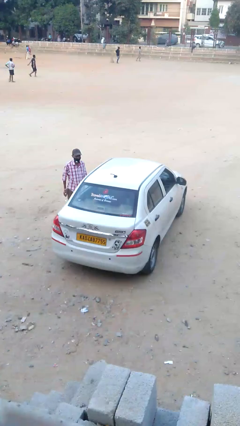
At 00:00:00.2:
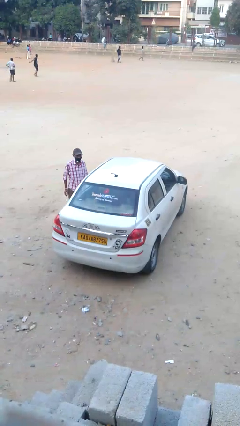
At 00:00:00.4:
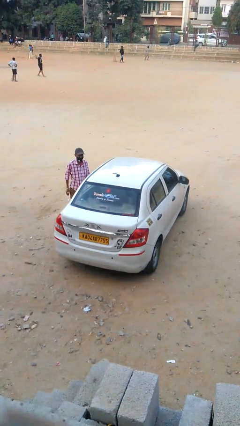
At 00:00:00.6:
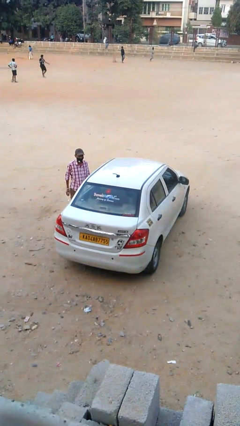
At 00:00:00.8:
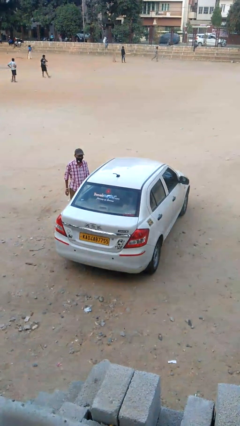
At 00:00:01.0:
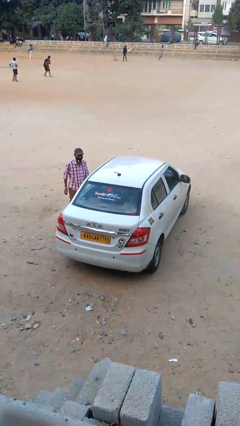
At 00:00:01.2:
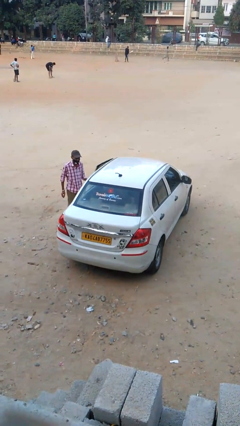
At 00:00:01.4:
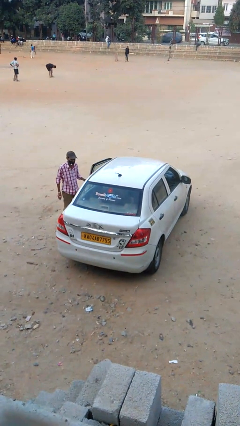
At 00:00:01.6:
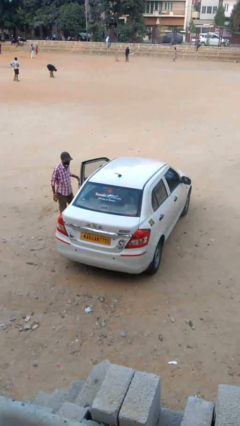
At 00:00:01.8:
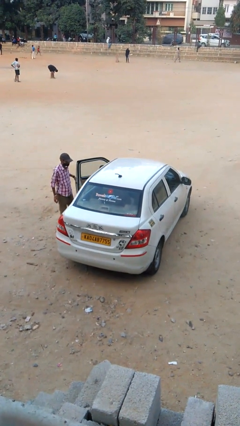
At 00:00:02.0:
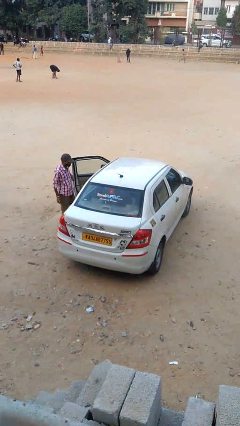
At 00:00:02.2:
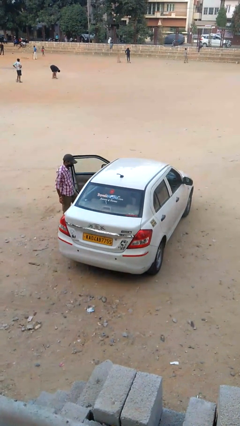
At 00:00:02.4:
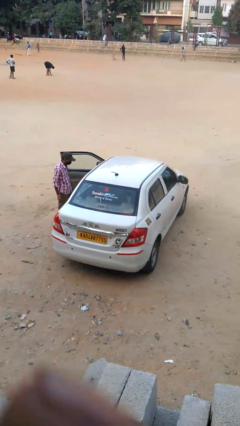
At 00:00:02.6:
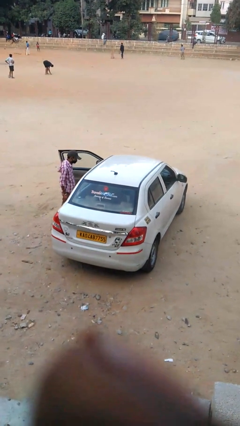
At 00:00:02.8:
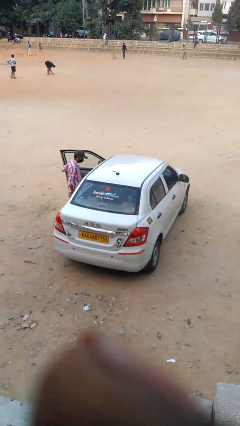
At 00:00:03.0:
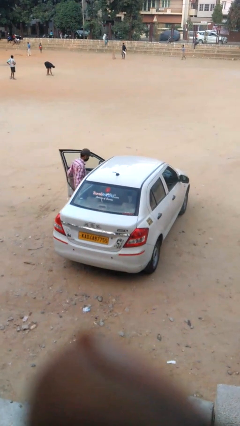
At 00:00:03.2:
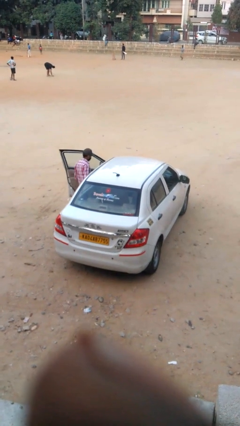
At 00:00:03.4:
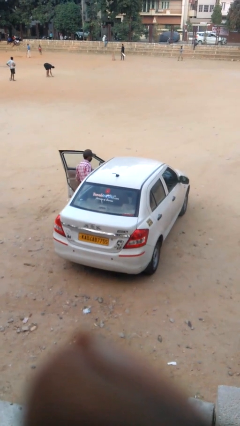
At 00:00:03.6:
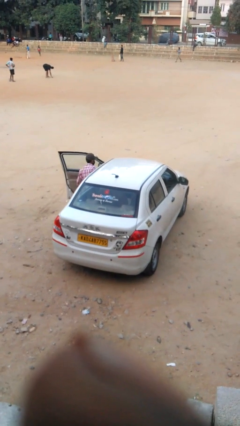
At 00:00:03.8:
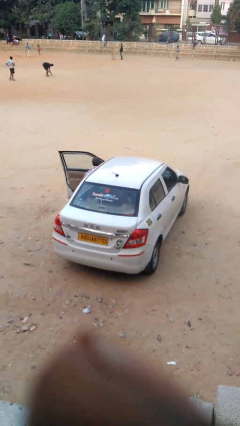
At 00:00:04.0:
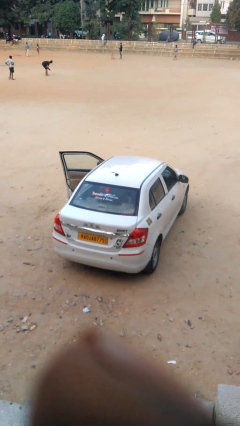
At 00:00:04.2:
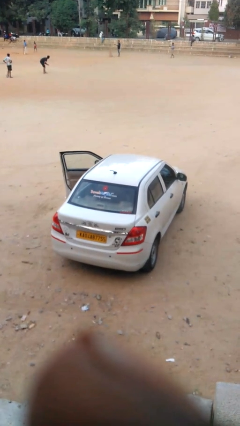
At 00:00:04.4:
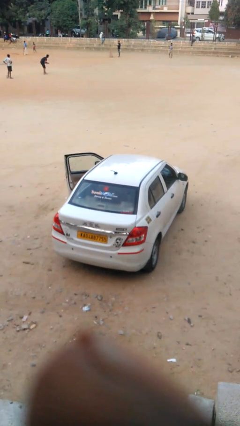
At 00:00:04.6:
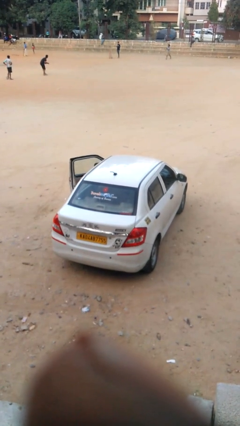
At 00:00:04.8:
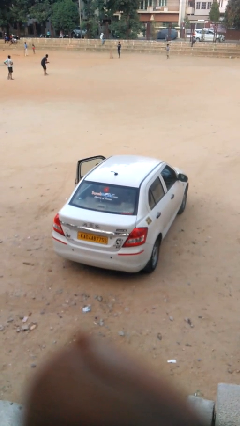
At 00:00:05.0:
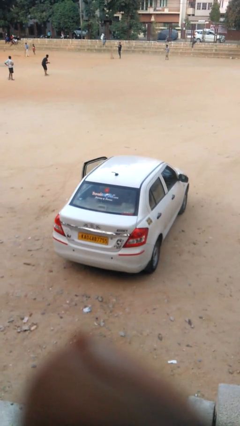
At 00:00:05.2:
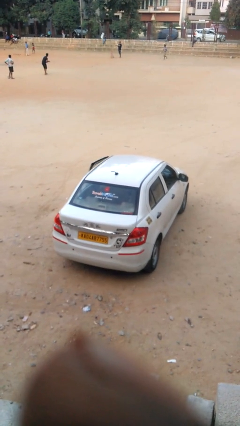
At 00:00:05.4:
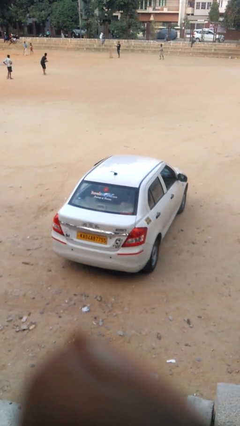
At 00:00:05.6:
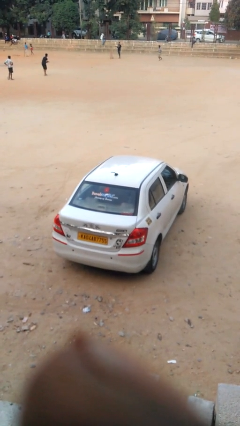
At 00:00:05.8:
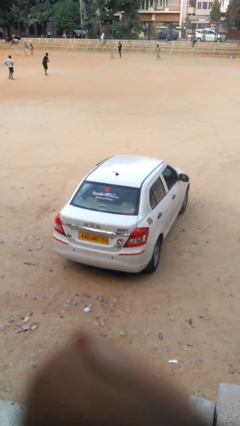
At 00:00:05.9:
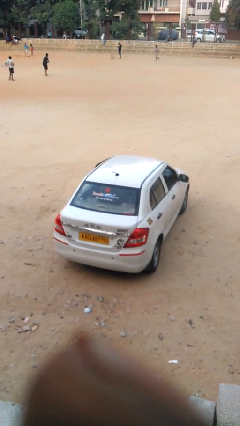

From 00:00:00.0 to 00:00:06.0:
car picks up person

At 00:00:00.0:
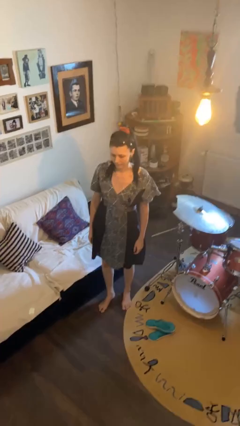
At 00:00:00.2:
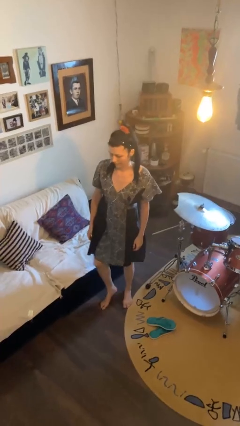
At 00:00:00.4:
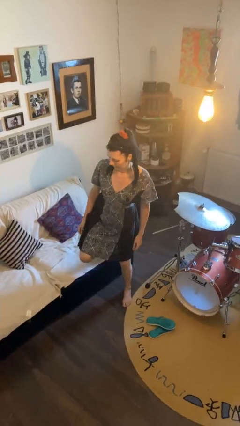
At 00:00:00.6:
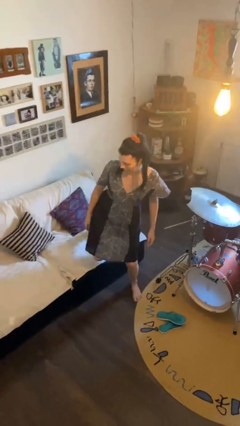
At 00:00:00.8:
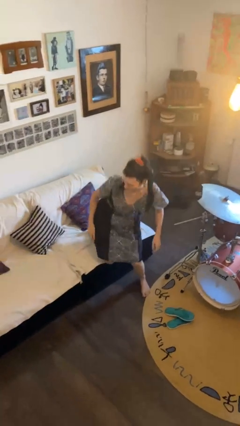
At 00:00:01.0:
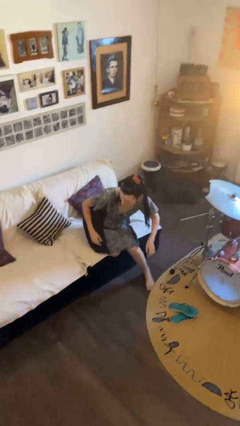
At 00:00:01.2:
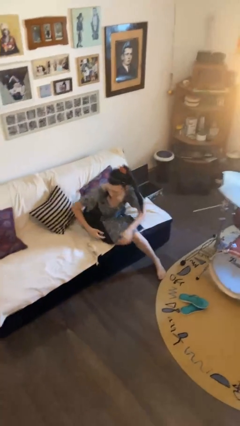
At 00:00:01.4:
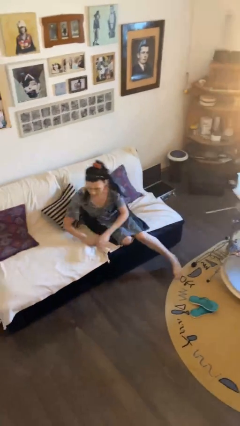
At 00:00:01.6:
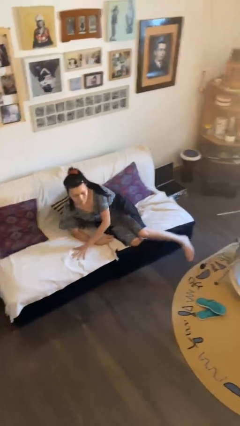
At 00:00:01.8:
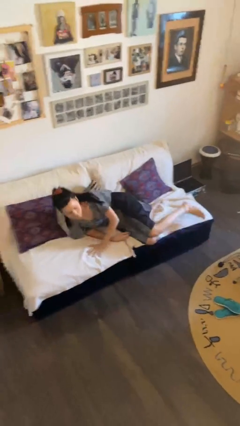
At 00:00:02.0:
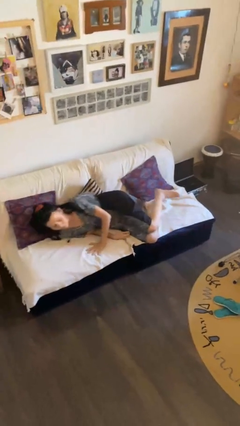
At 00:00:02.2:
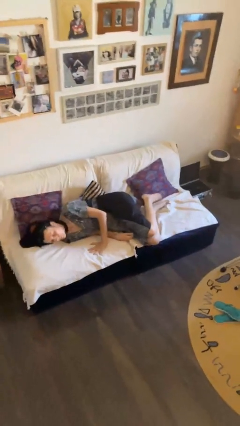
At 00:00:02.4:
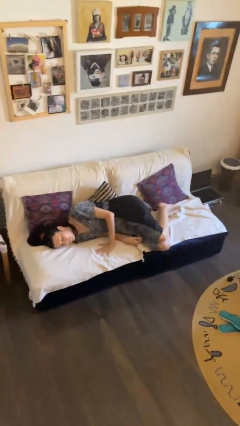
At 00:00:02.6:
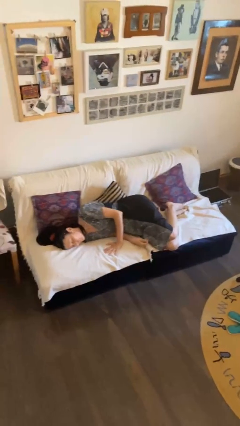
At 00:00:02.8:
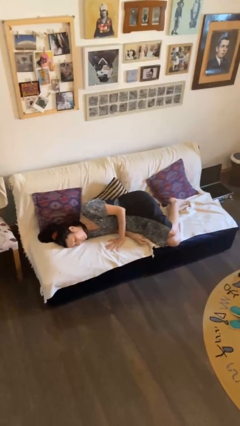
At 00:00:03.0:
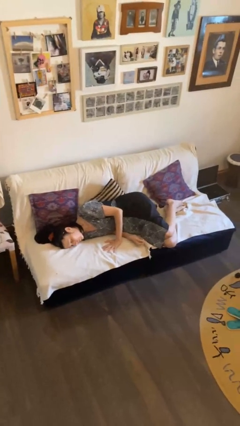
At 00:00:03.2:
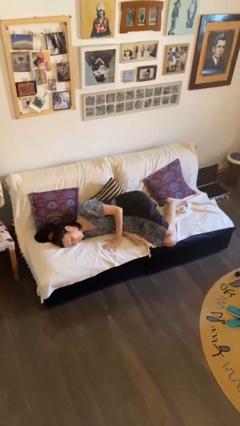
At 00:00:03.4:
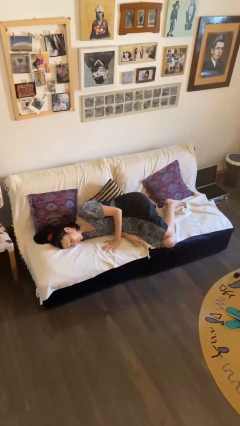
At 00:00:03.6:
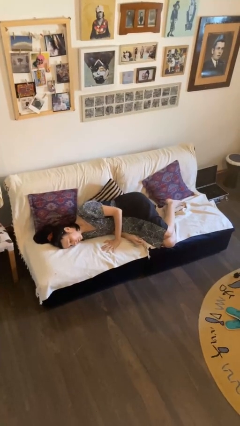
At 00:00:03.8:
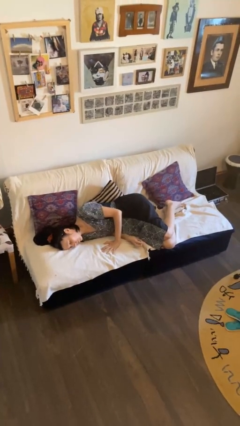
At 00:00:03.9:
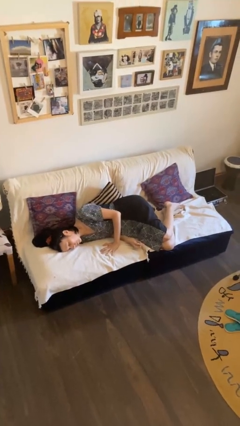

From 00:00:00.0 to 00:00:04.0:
person lies down on couch

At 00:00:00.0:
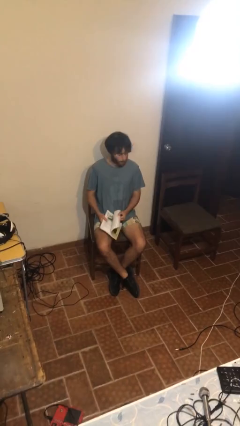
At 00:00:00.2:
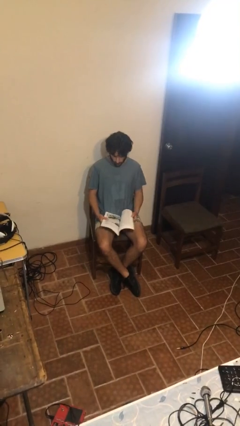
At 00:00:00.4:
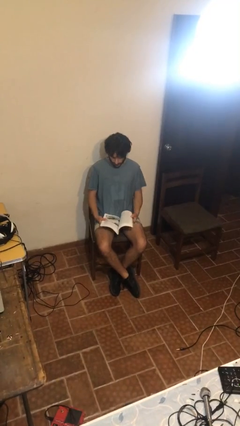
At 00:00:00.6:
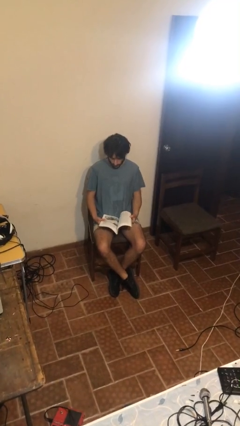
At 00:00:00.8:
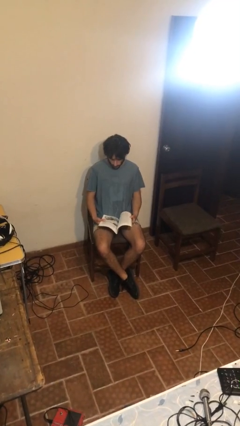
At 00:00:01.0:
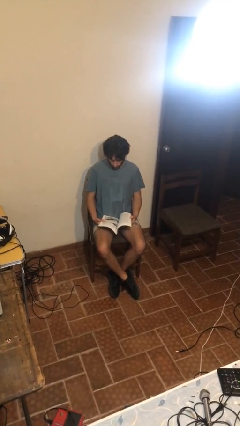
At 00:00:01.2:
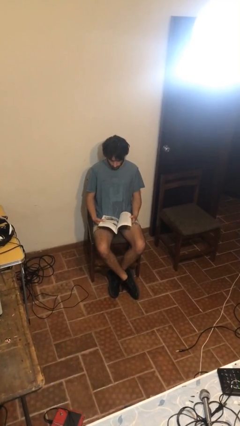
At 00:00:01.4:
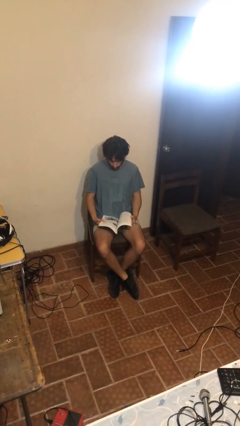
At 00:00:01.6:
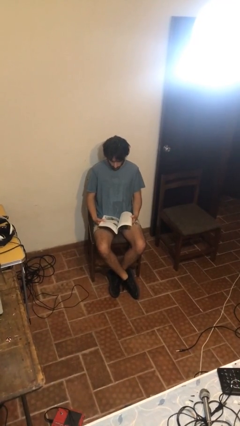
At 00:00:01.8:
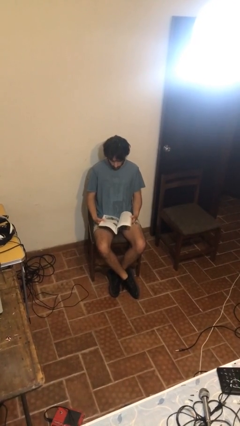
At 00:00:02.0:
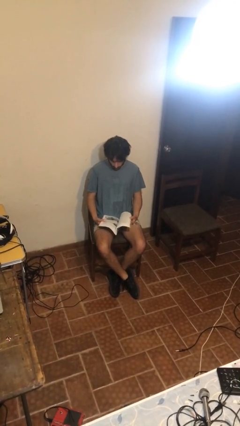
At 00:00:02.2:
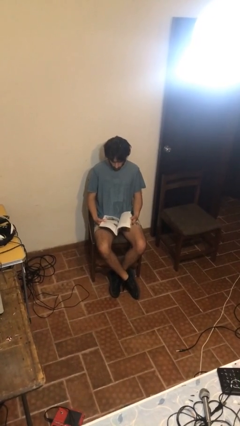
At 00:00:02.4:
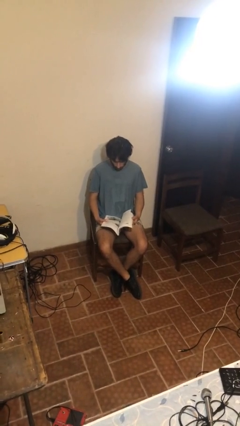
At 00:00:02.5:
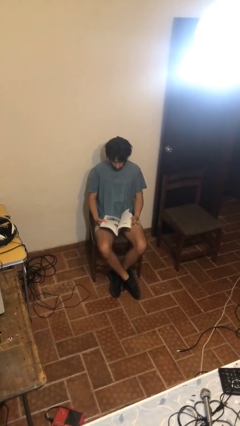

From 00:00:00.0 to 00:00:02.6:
person reads document

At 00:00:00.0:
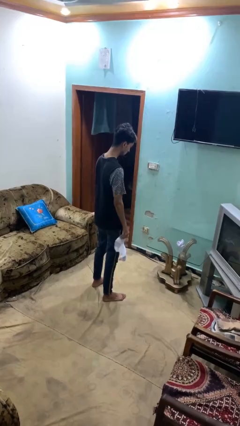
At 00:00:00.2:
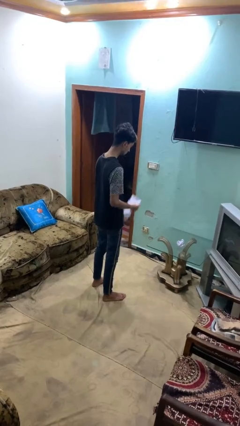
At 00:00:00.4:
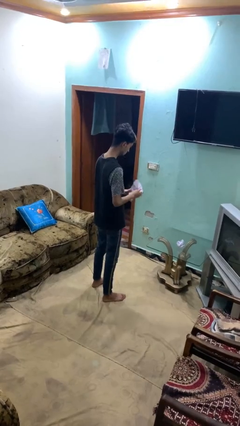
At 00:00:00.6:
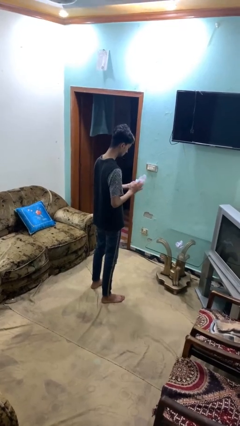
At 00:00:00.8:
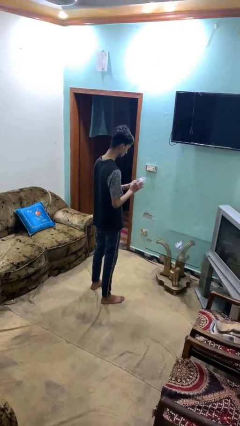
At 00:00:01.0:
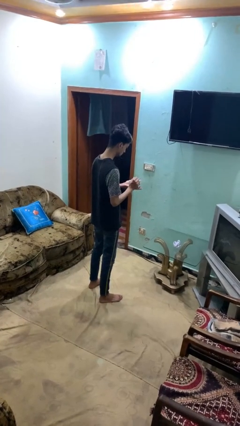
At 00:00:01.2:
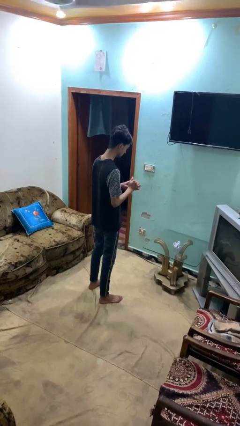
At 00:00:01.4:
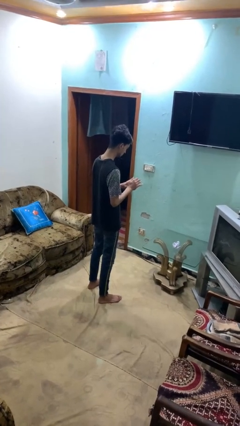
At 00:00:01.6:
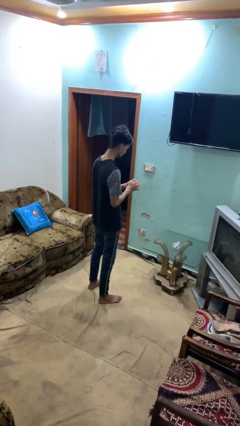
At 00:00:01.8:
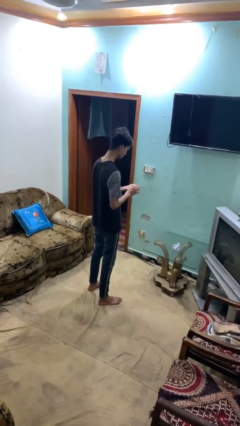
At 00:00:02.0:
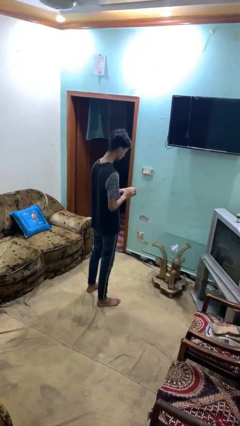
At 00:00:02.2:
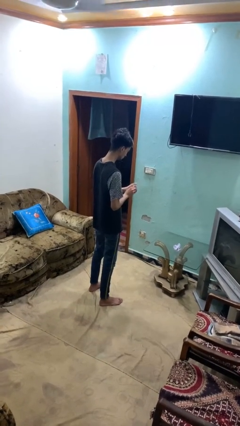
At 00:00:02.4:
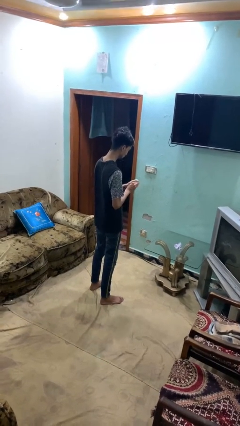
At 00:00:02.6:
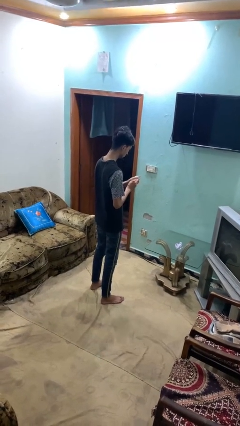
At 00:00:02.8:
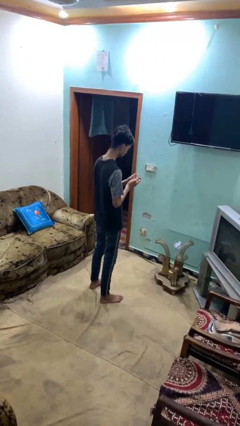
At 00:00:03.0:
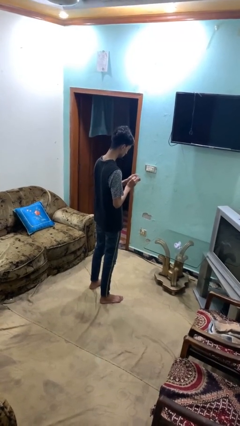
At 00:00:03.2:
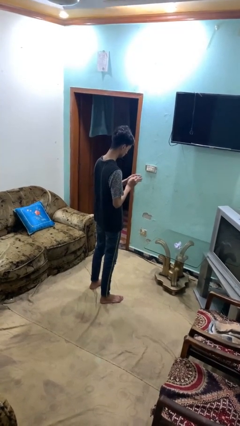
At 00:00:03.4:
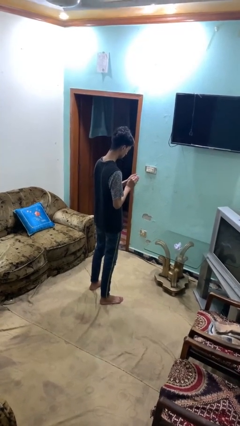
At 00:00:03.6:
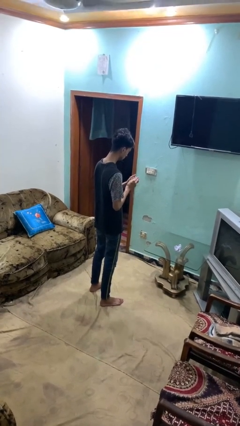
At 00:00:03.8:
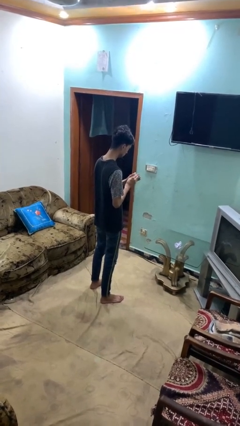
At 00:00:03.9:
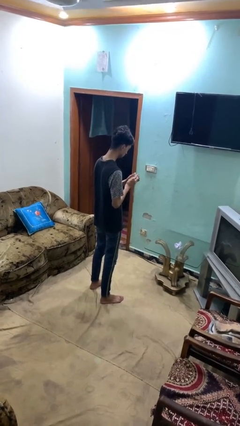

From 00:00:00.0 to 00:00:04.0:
person crumples paper

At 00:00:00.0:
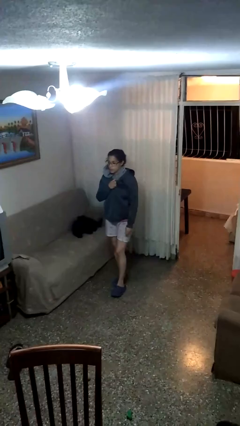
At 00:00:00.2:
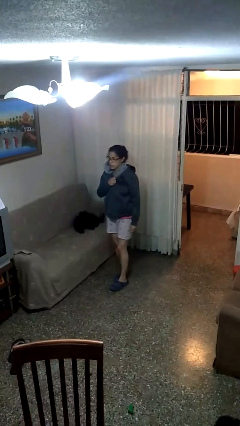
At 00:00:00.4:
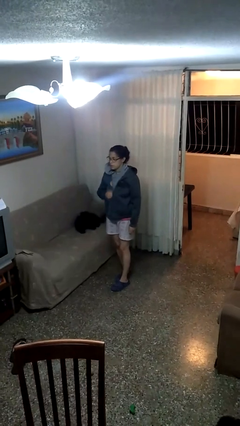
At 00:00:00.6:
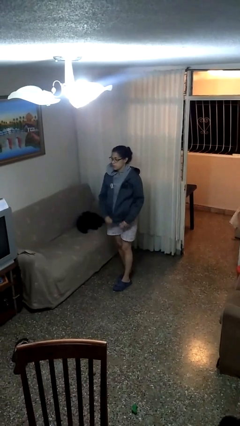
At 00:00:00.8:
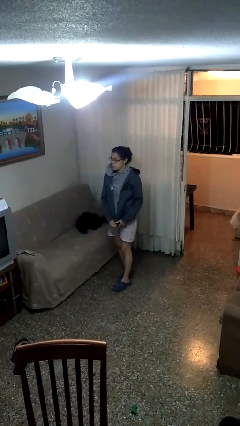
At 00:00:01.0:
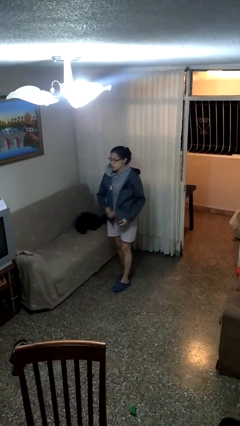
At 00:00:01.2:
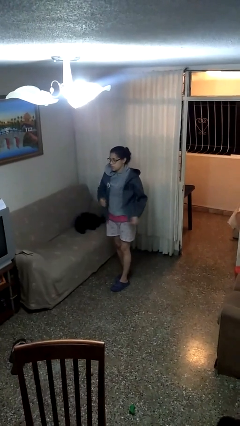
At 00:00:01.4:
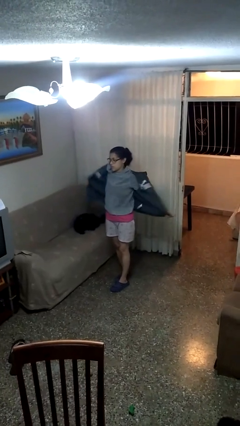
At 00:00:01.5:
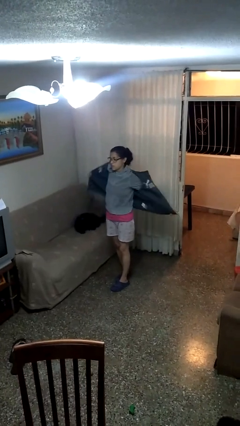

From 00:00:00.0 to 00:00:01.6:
person unzips jacket
